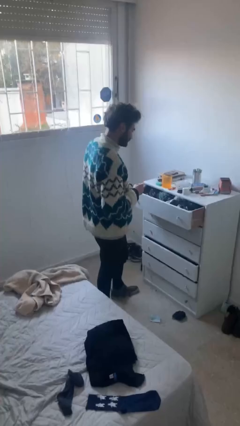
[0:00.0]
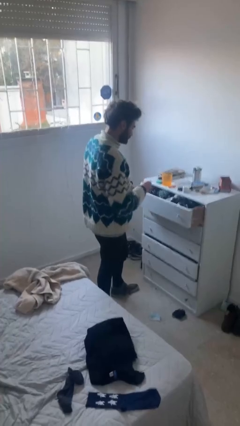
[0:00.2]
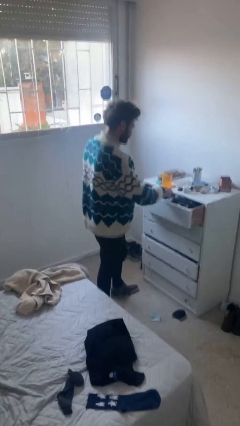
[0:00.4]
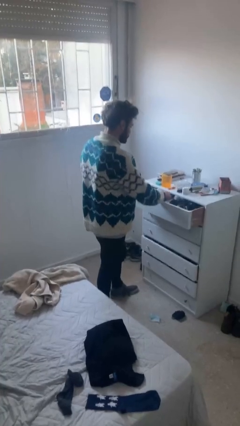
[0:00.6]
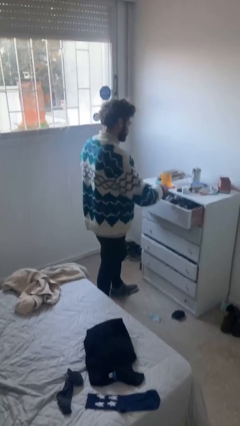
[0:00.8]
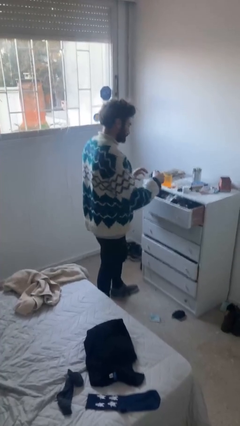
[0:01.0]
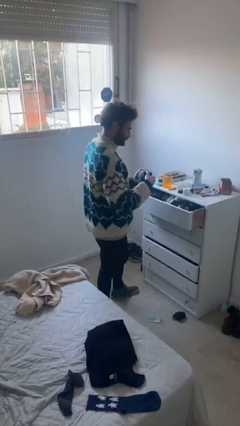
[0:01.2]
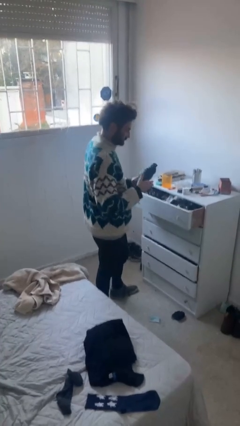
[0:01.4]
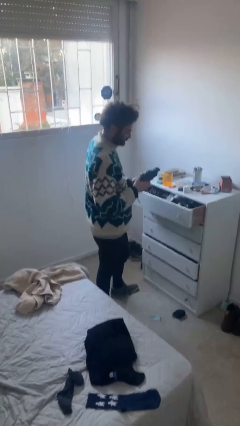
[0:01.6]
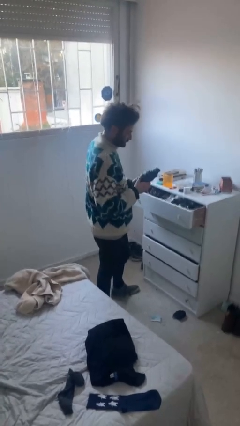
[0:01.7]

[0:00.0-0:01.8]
person takes clothes from dresser

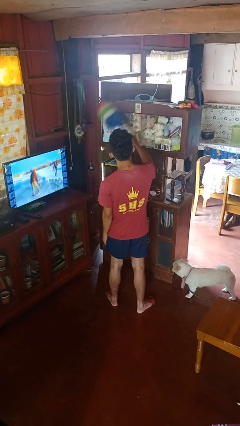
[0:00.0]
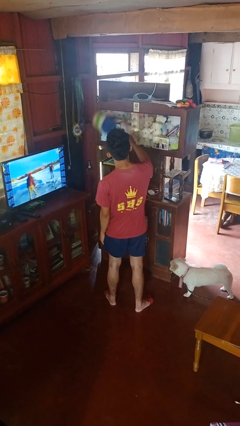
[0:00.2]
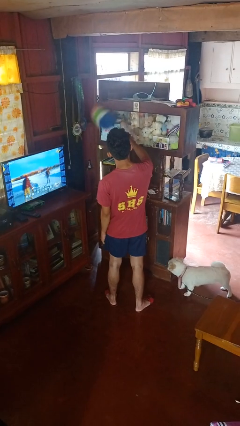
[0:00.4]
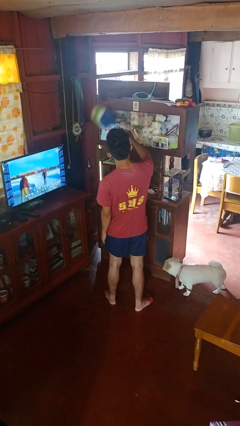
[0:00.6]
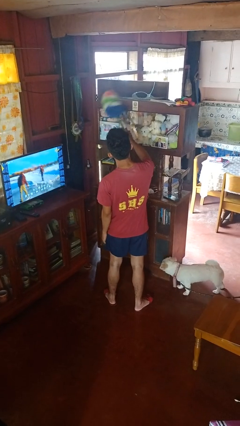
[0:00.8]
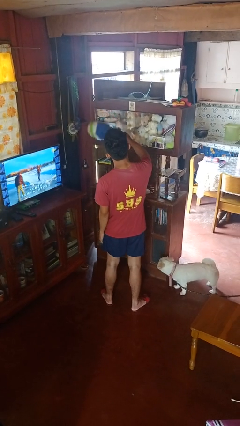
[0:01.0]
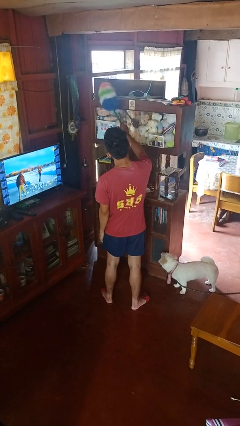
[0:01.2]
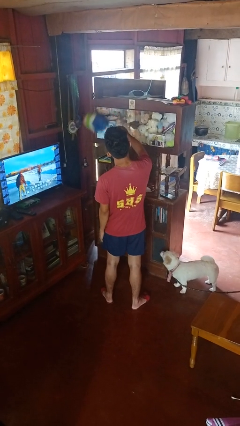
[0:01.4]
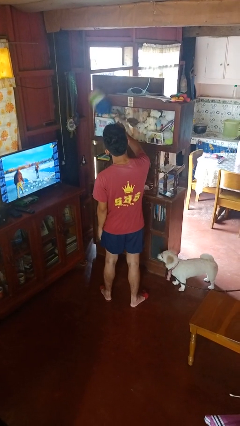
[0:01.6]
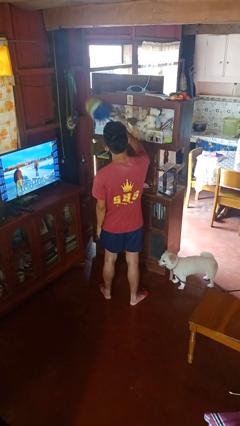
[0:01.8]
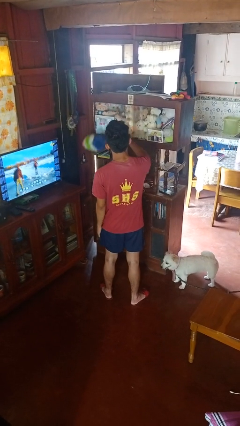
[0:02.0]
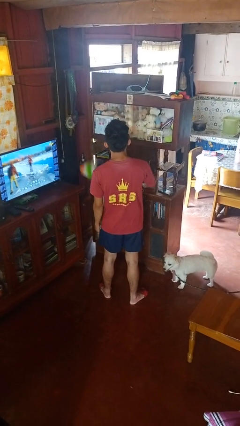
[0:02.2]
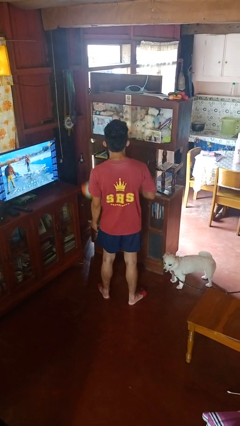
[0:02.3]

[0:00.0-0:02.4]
person dusts furniture

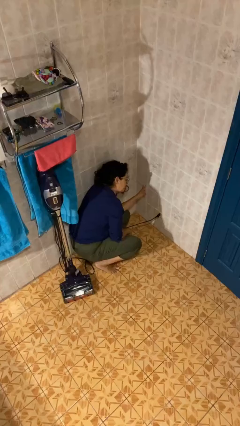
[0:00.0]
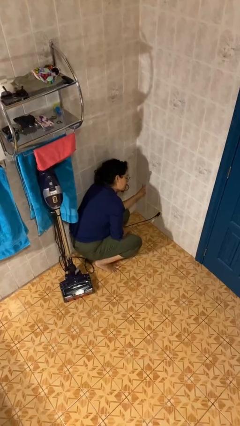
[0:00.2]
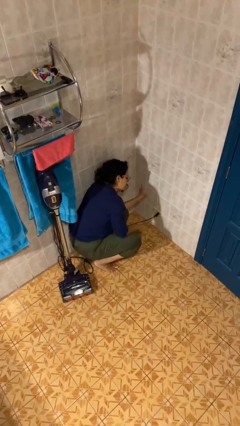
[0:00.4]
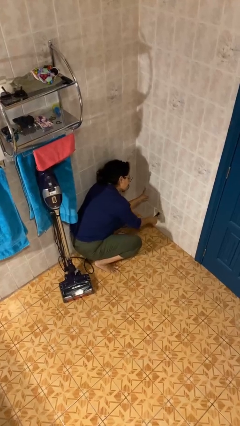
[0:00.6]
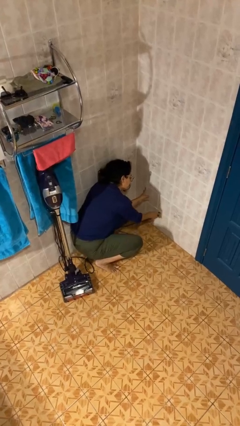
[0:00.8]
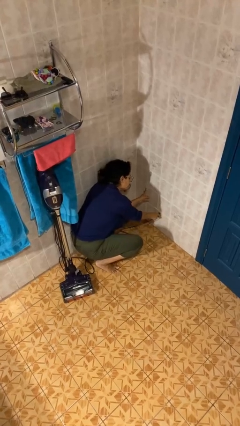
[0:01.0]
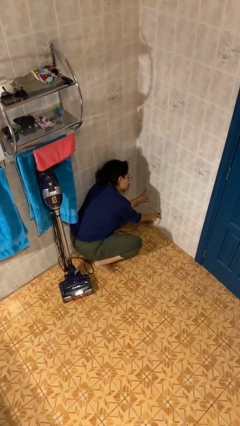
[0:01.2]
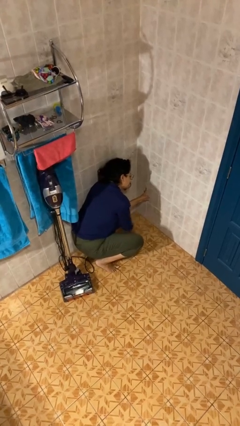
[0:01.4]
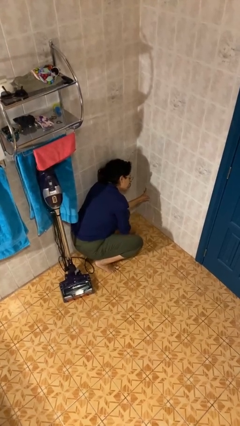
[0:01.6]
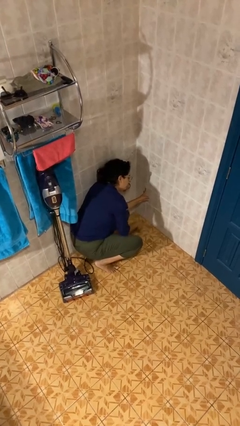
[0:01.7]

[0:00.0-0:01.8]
person unplugs from electrical socket

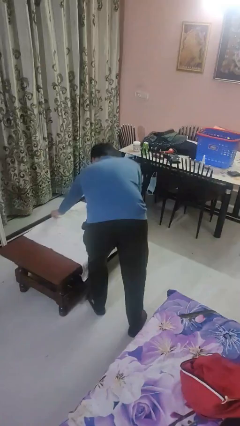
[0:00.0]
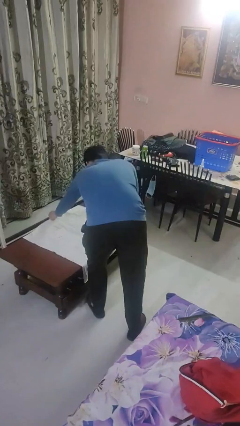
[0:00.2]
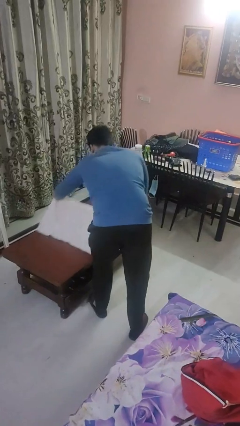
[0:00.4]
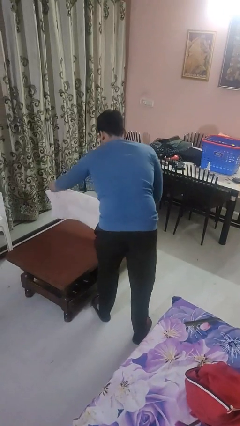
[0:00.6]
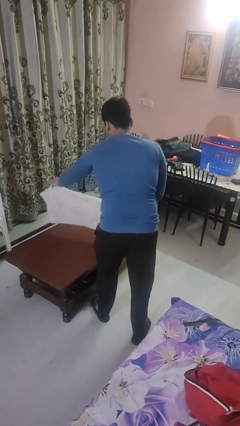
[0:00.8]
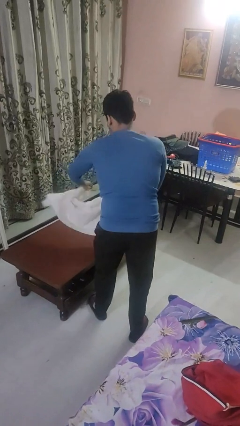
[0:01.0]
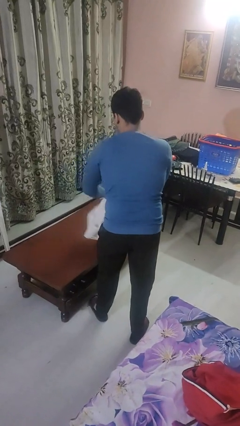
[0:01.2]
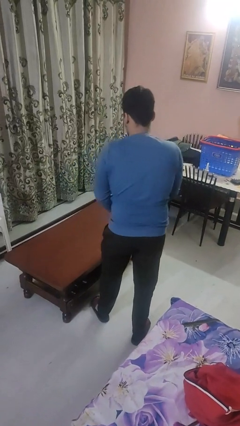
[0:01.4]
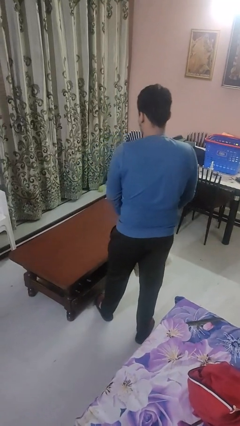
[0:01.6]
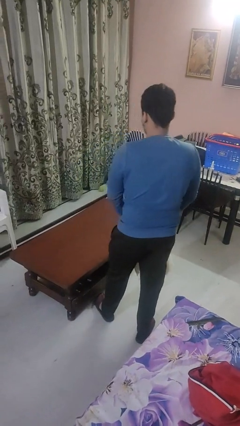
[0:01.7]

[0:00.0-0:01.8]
person folds tablecloth

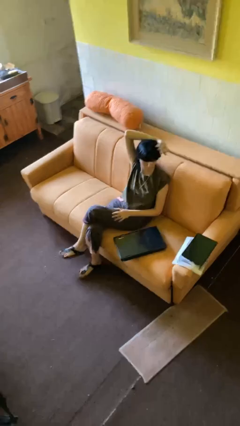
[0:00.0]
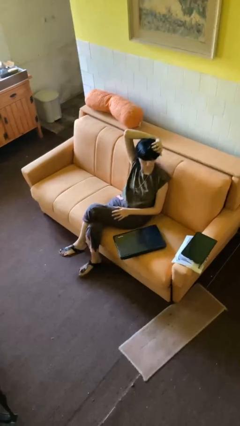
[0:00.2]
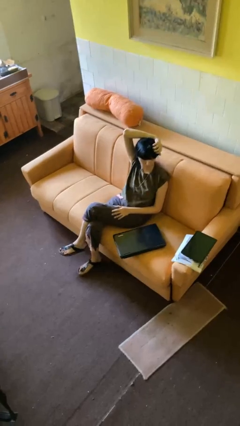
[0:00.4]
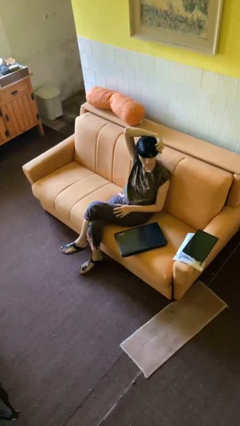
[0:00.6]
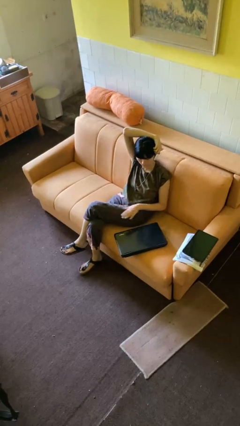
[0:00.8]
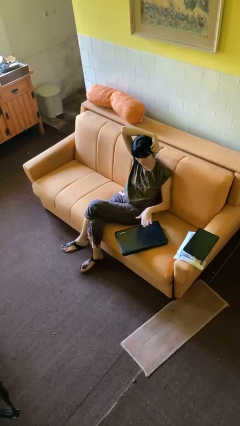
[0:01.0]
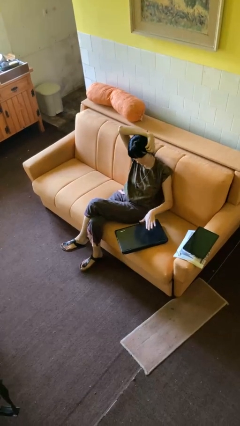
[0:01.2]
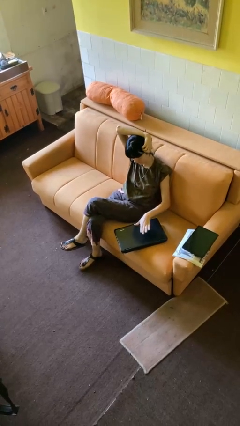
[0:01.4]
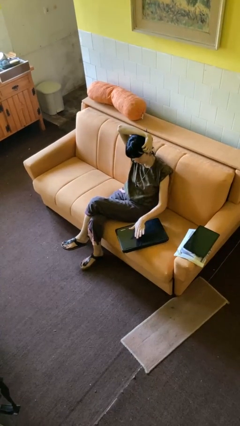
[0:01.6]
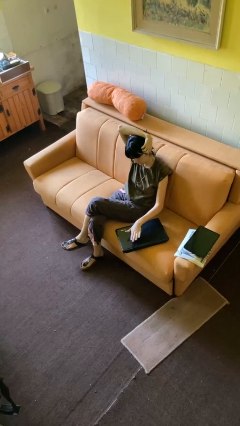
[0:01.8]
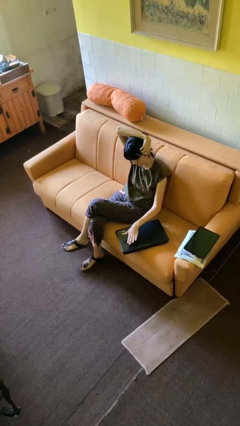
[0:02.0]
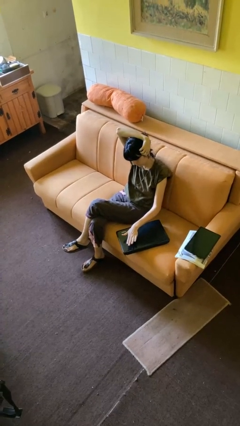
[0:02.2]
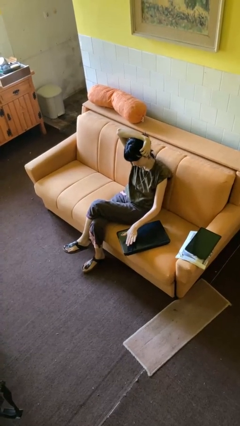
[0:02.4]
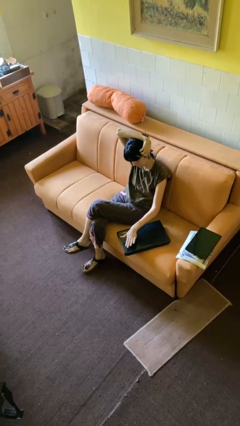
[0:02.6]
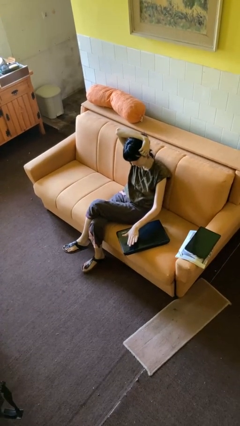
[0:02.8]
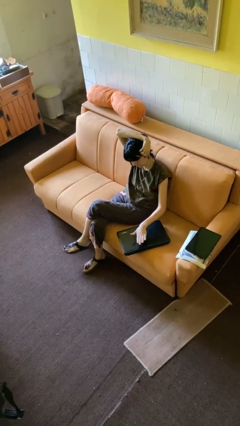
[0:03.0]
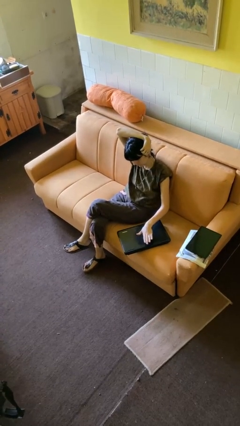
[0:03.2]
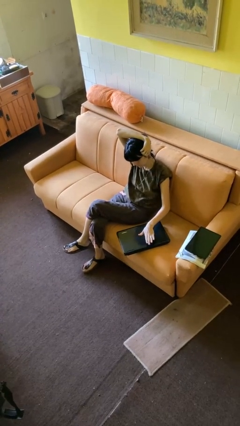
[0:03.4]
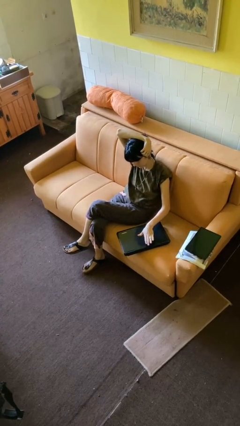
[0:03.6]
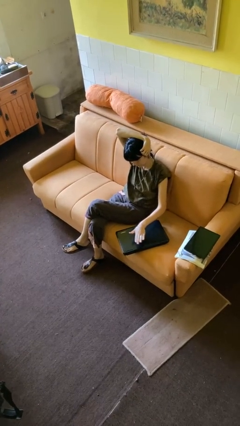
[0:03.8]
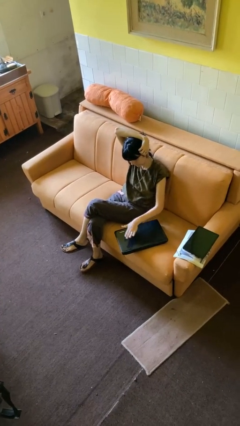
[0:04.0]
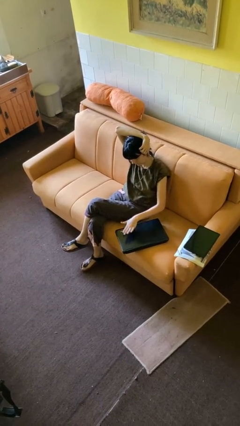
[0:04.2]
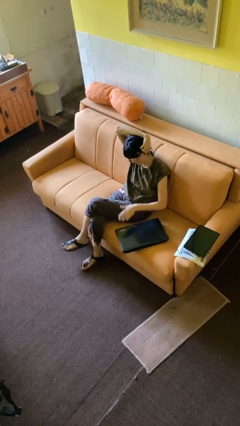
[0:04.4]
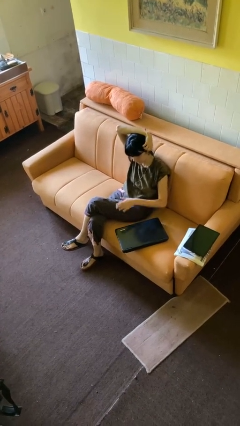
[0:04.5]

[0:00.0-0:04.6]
person waves hand over object

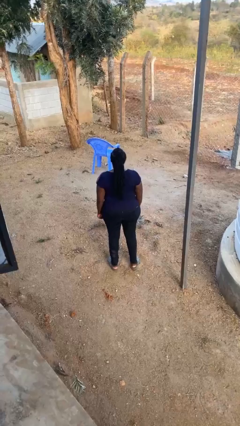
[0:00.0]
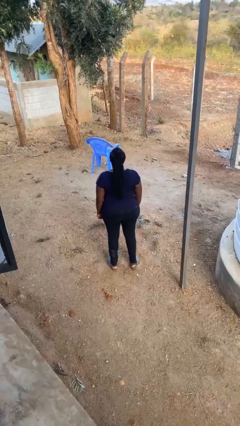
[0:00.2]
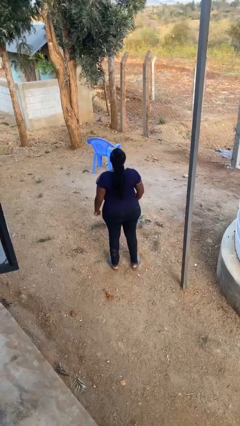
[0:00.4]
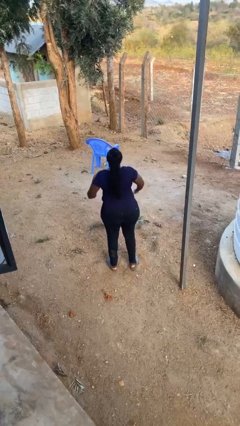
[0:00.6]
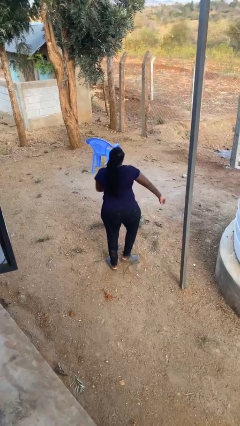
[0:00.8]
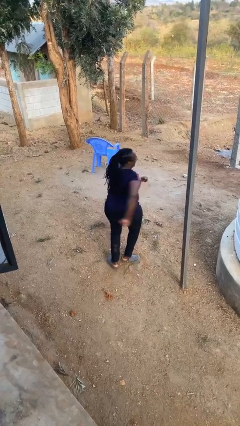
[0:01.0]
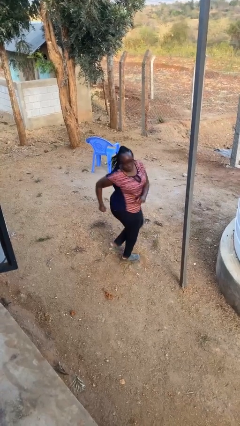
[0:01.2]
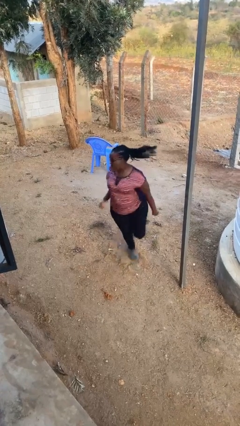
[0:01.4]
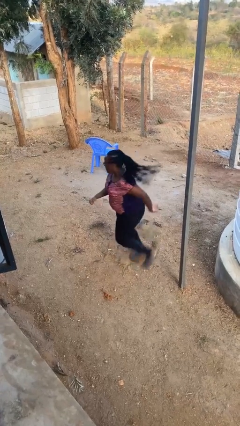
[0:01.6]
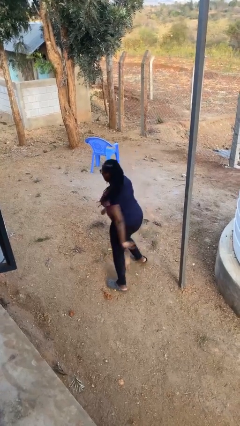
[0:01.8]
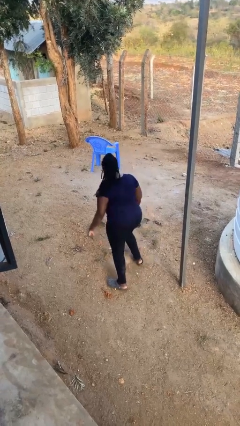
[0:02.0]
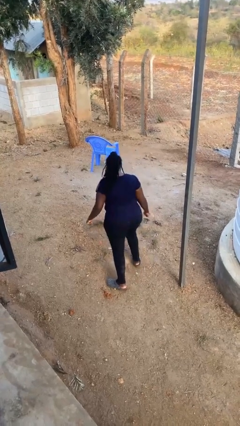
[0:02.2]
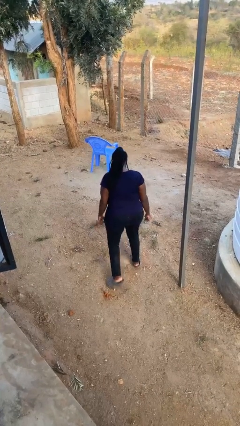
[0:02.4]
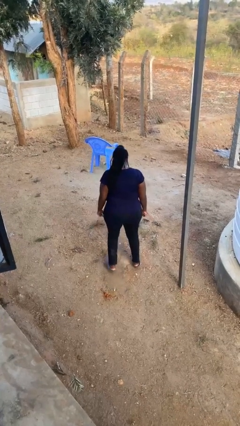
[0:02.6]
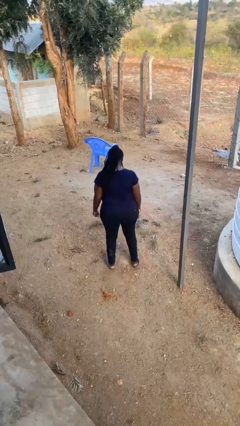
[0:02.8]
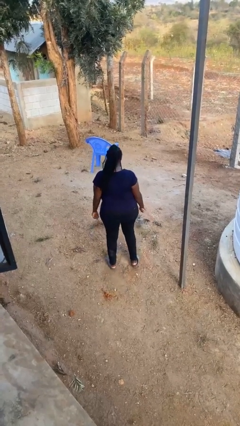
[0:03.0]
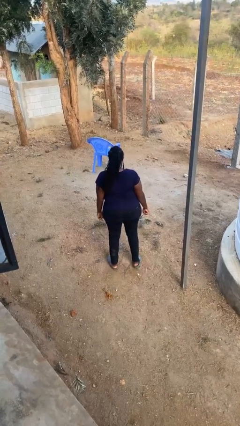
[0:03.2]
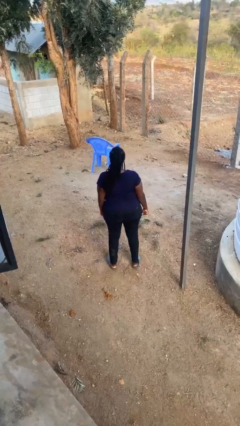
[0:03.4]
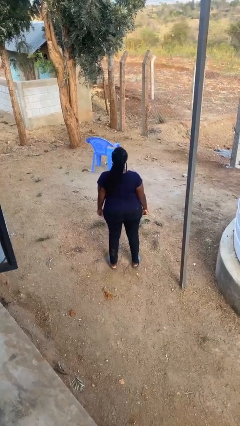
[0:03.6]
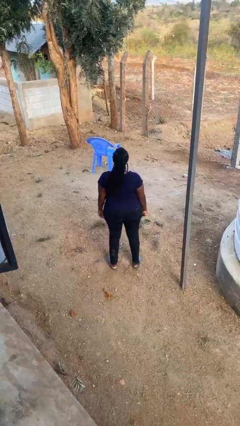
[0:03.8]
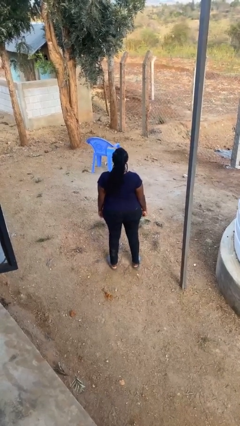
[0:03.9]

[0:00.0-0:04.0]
person twirls

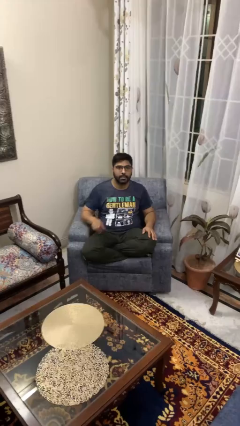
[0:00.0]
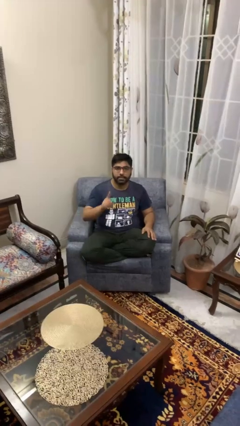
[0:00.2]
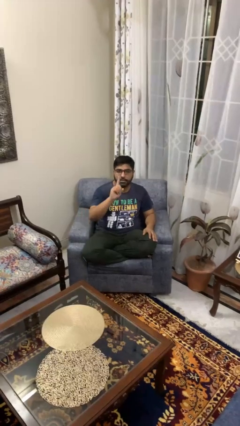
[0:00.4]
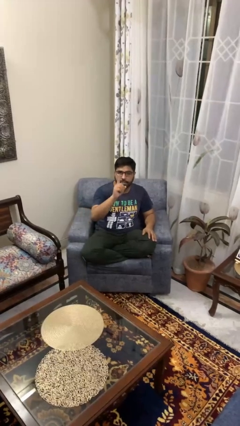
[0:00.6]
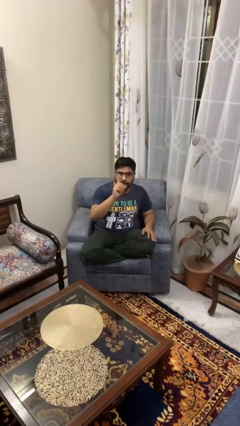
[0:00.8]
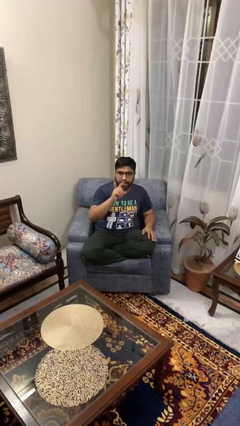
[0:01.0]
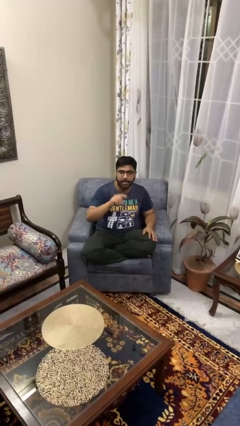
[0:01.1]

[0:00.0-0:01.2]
person gestures number one
